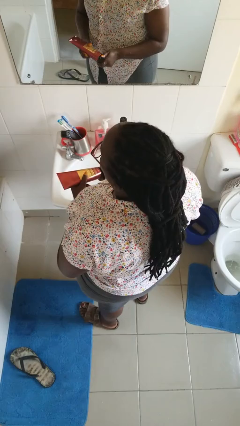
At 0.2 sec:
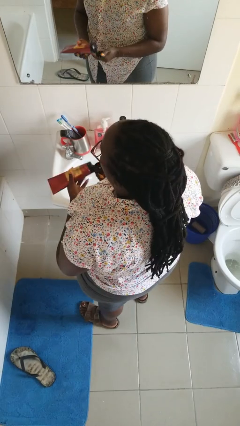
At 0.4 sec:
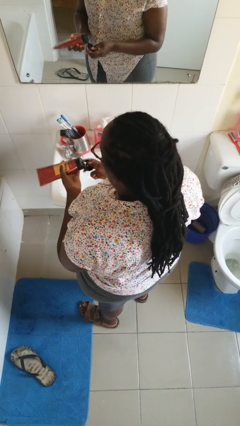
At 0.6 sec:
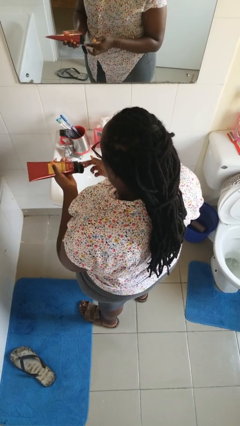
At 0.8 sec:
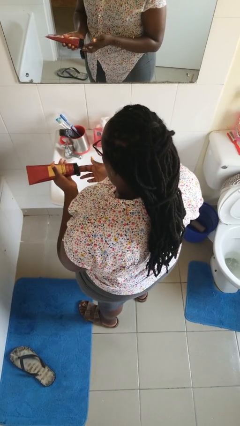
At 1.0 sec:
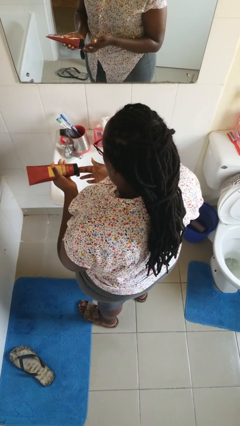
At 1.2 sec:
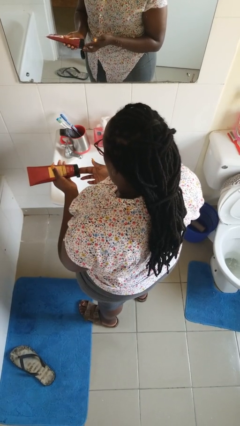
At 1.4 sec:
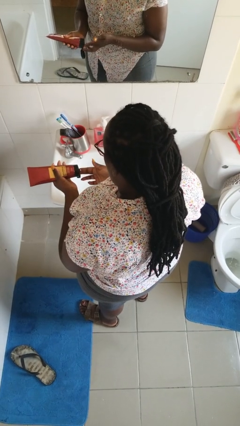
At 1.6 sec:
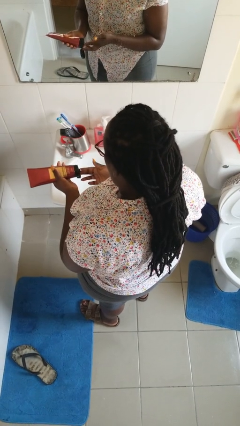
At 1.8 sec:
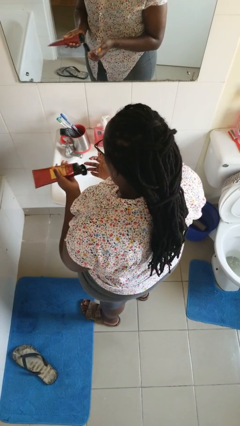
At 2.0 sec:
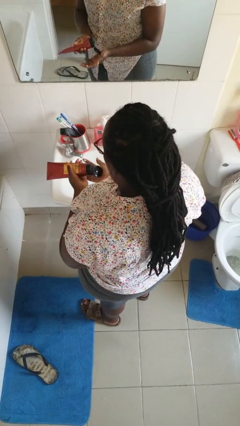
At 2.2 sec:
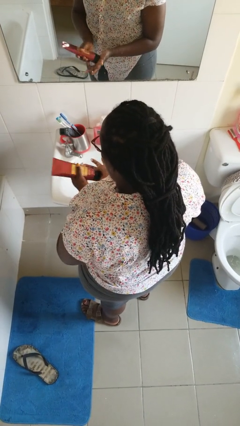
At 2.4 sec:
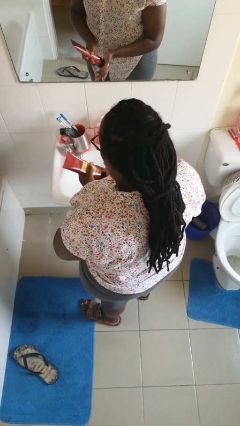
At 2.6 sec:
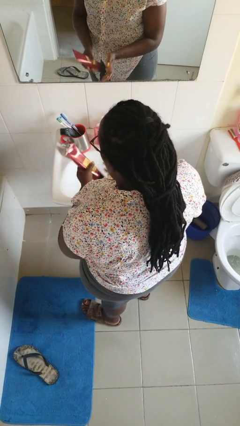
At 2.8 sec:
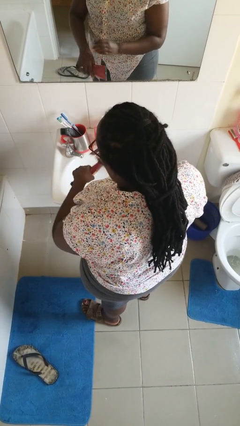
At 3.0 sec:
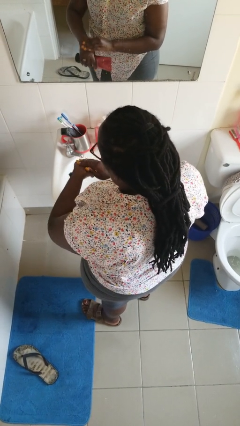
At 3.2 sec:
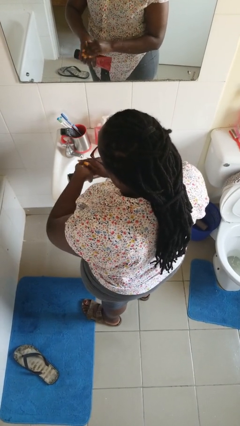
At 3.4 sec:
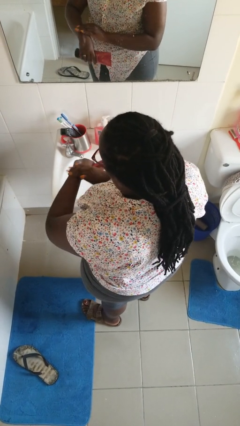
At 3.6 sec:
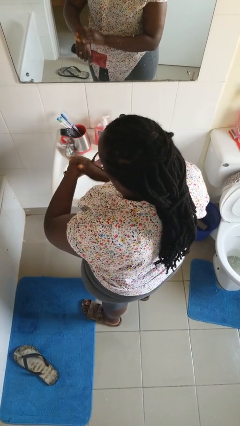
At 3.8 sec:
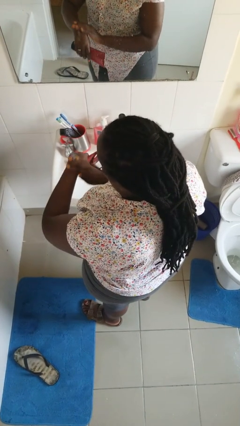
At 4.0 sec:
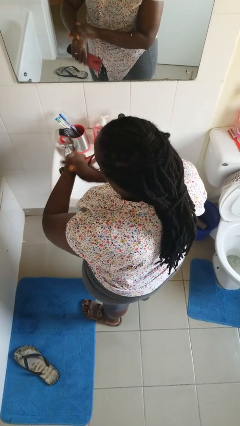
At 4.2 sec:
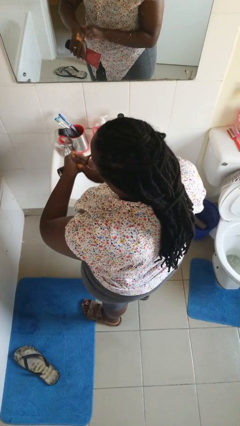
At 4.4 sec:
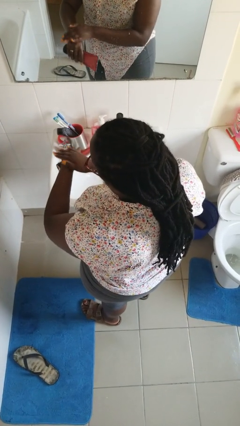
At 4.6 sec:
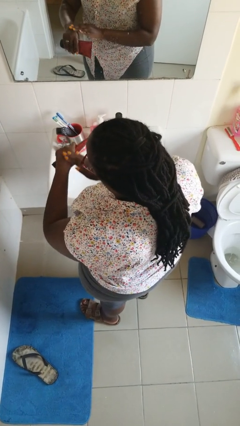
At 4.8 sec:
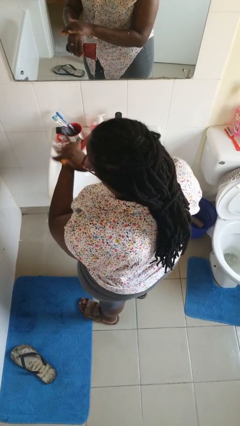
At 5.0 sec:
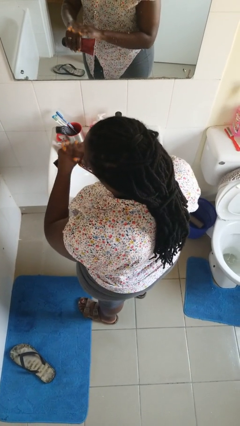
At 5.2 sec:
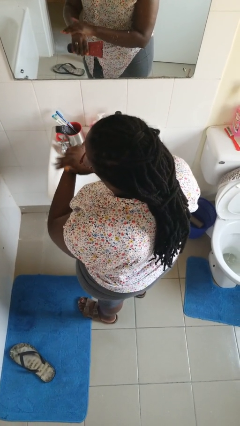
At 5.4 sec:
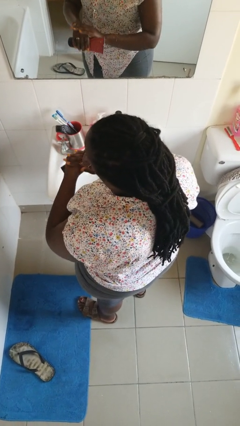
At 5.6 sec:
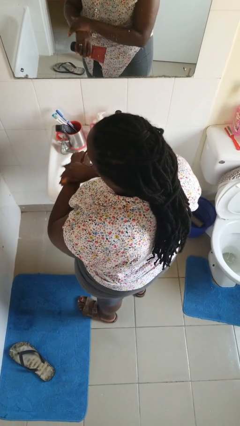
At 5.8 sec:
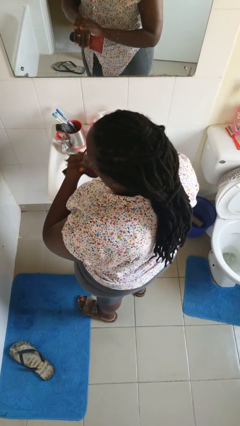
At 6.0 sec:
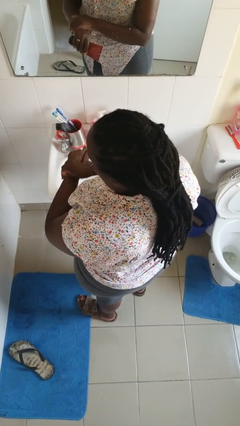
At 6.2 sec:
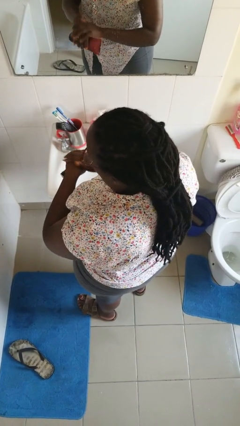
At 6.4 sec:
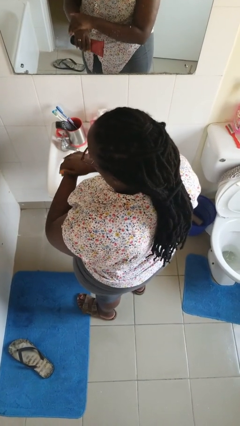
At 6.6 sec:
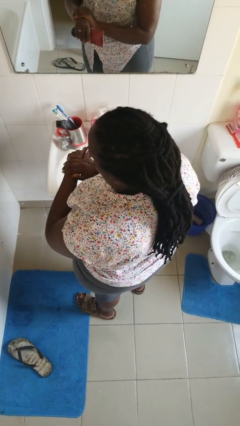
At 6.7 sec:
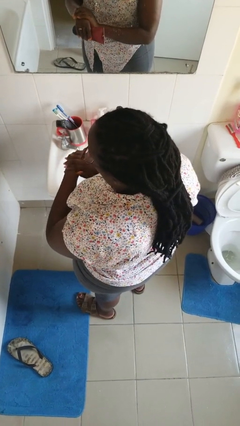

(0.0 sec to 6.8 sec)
person applies sunscreen

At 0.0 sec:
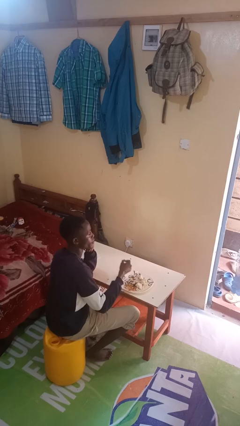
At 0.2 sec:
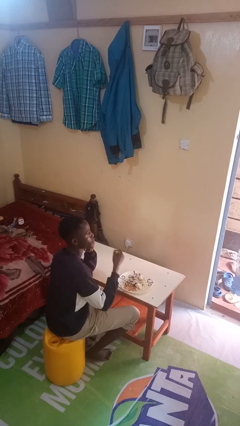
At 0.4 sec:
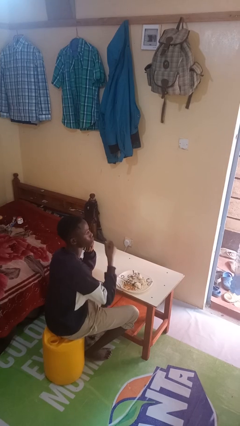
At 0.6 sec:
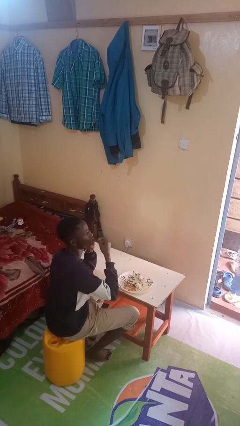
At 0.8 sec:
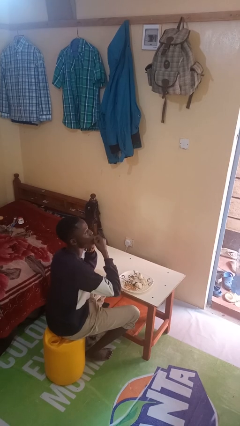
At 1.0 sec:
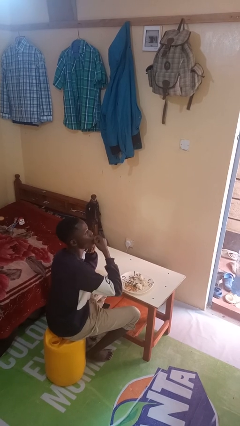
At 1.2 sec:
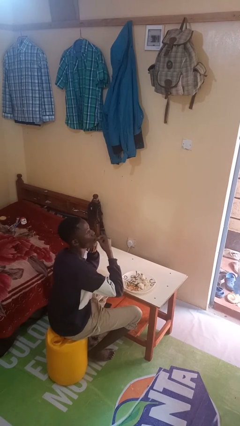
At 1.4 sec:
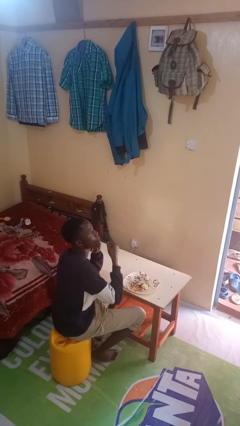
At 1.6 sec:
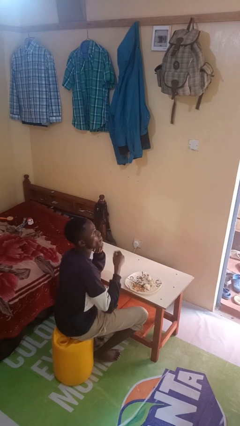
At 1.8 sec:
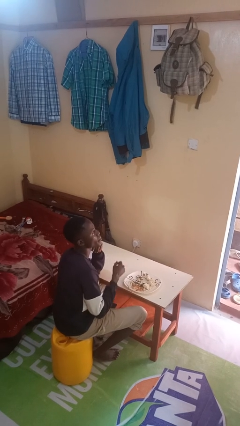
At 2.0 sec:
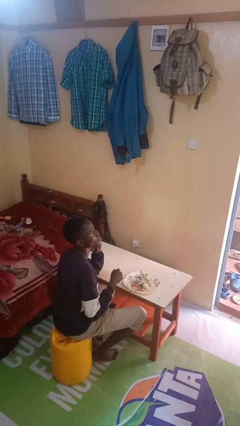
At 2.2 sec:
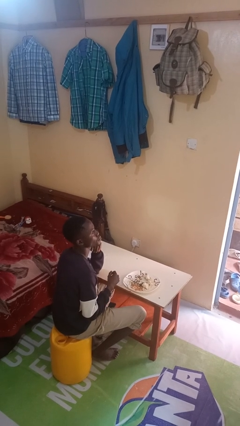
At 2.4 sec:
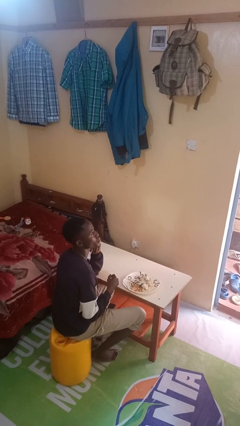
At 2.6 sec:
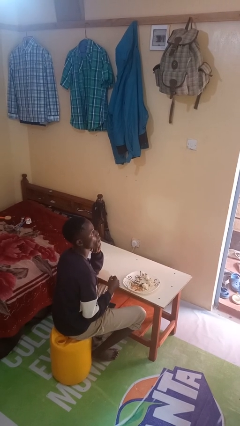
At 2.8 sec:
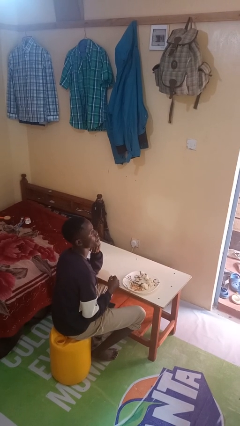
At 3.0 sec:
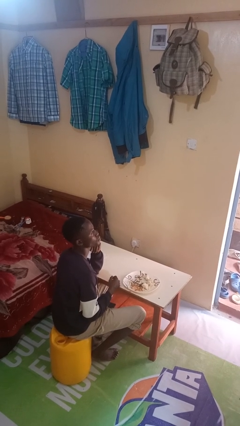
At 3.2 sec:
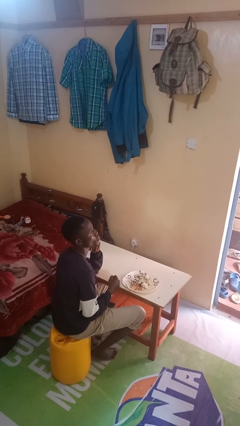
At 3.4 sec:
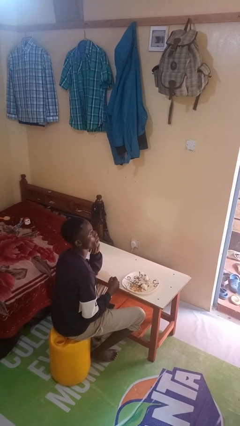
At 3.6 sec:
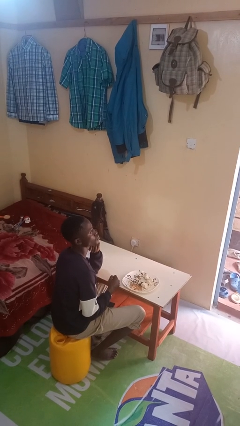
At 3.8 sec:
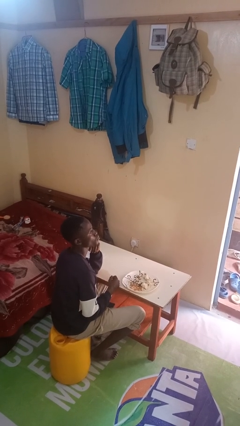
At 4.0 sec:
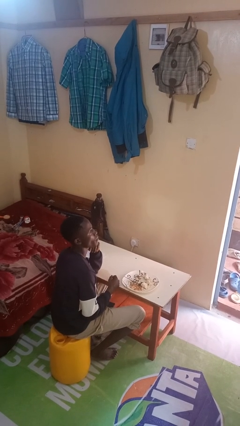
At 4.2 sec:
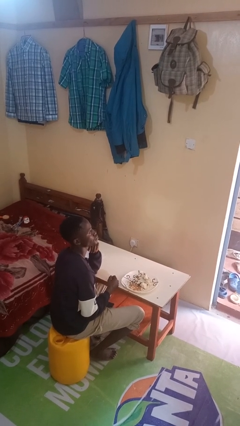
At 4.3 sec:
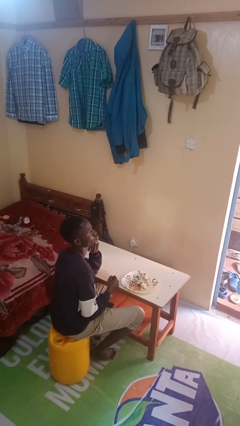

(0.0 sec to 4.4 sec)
person eats with hands

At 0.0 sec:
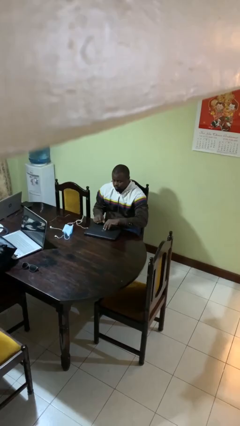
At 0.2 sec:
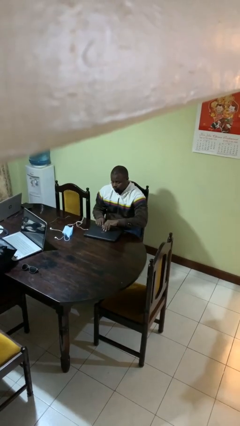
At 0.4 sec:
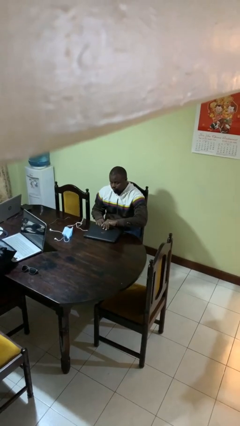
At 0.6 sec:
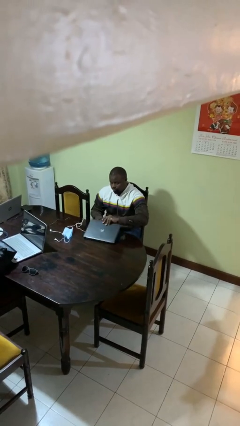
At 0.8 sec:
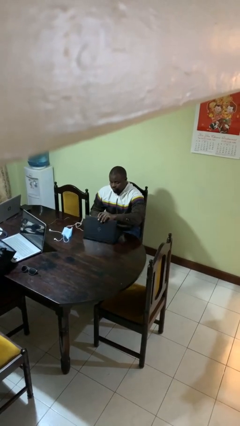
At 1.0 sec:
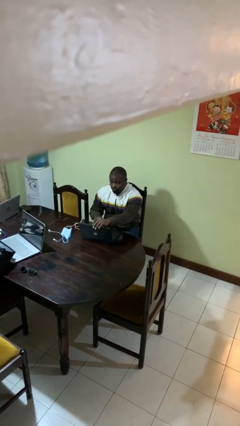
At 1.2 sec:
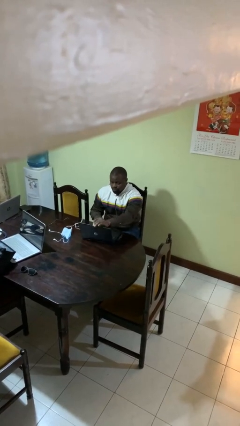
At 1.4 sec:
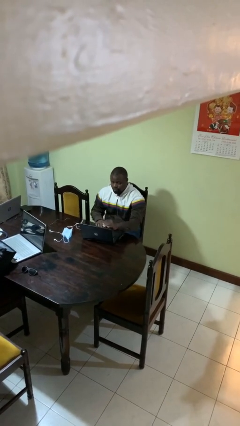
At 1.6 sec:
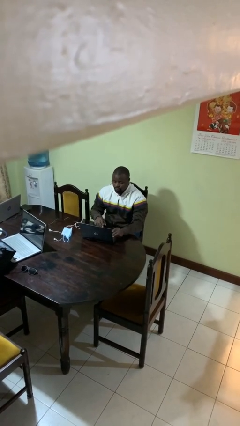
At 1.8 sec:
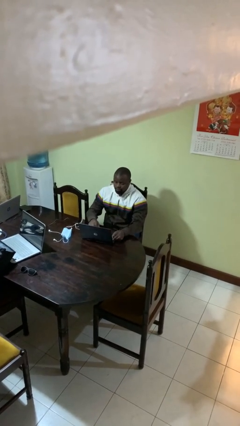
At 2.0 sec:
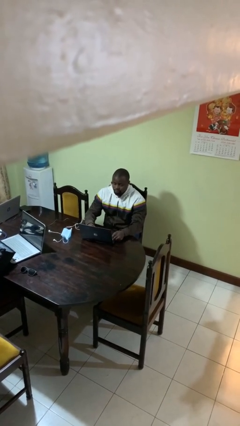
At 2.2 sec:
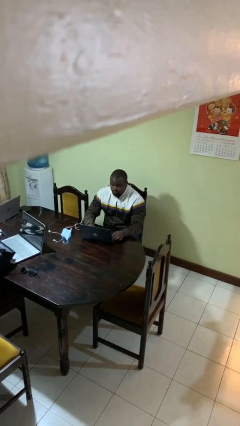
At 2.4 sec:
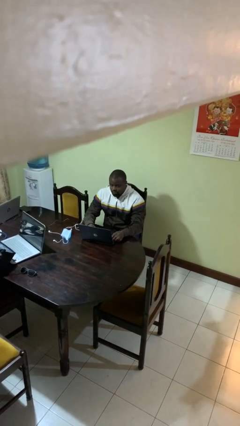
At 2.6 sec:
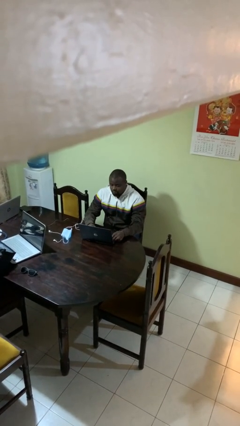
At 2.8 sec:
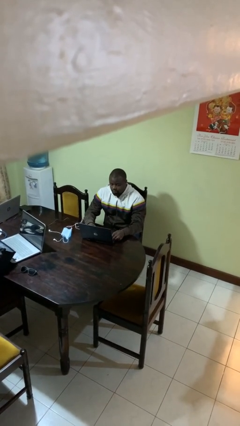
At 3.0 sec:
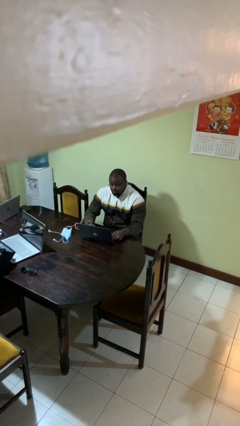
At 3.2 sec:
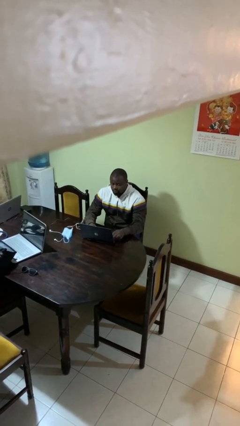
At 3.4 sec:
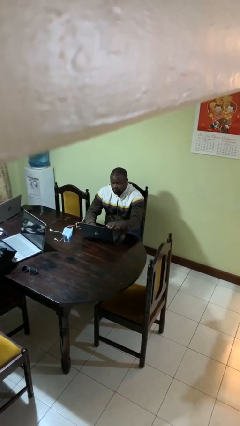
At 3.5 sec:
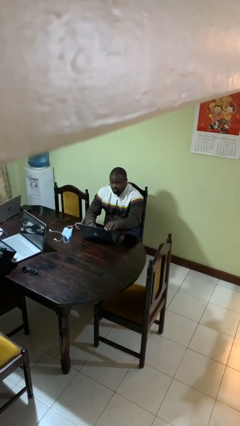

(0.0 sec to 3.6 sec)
person opens laptop

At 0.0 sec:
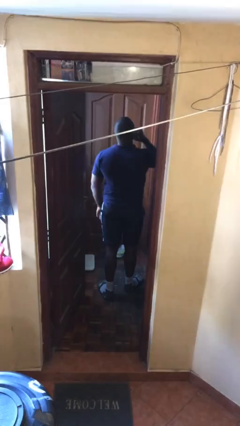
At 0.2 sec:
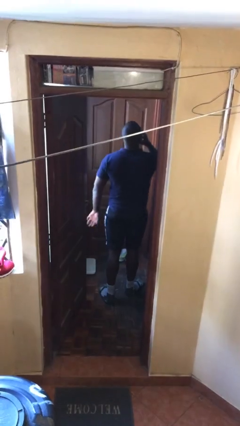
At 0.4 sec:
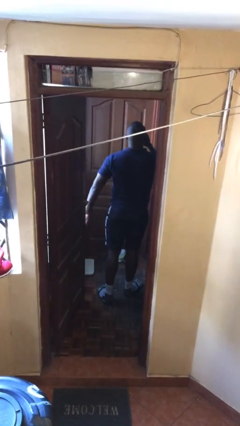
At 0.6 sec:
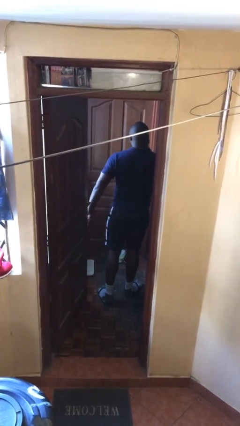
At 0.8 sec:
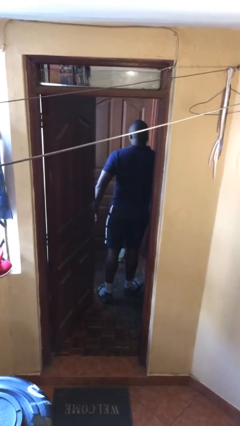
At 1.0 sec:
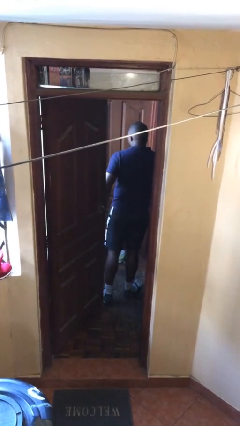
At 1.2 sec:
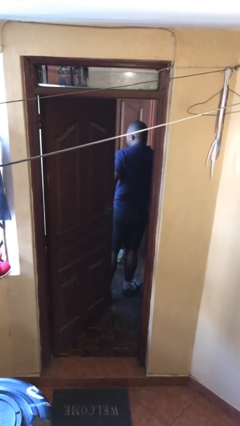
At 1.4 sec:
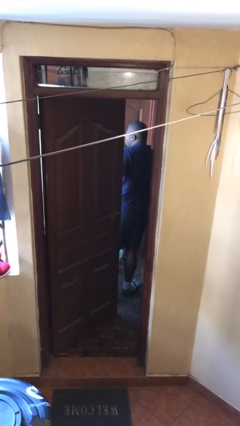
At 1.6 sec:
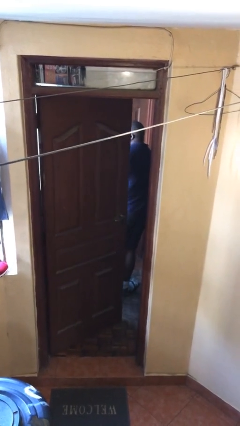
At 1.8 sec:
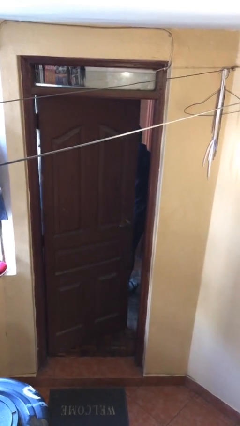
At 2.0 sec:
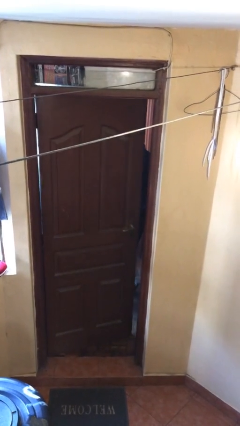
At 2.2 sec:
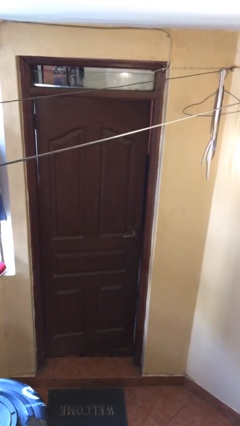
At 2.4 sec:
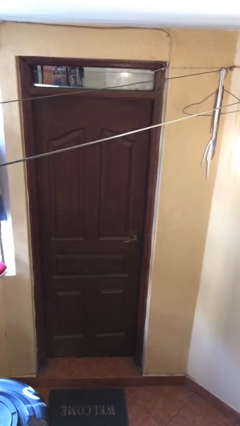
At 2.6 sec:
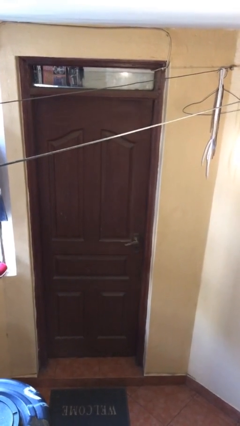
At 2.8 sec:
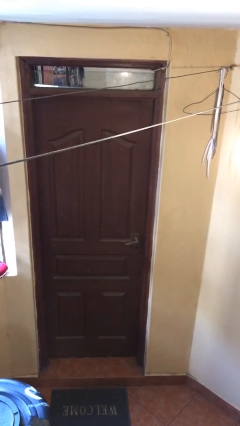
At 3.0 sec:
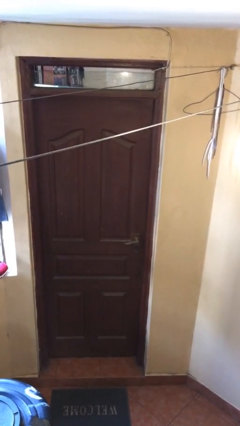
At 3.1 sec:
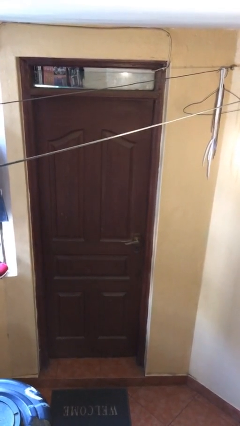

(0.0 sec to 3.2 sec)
person closes facility door
